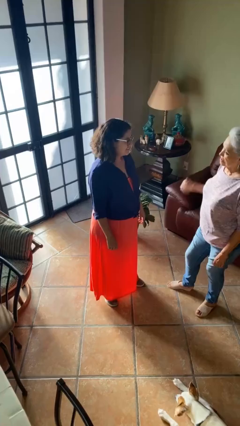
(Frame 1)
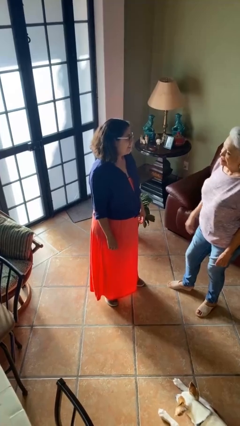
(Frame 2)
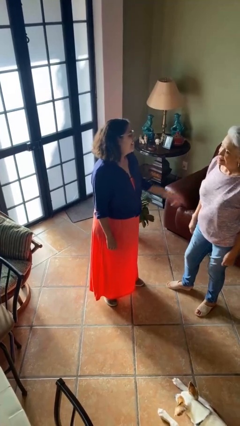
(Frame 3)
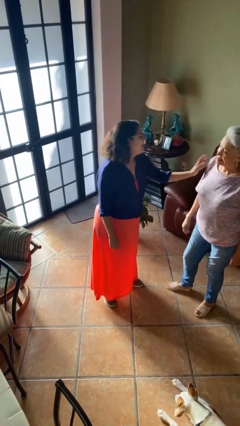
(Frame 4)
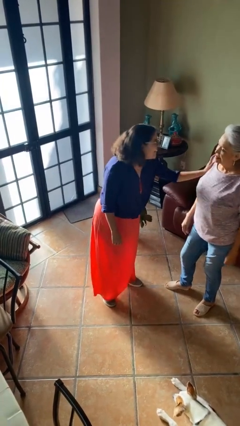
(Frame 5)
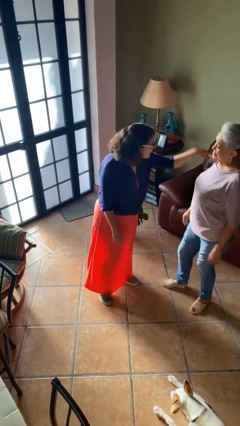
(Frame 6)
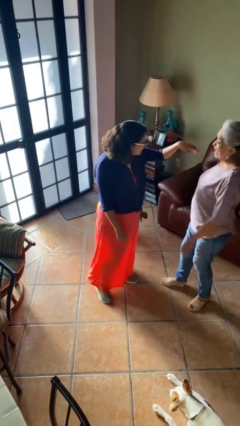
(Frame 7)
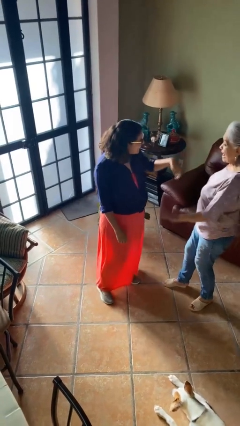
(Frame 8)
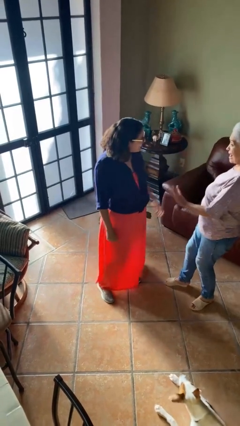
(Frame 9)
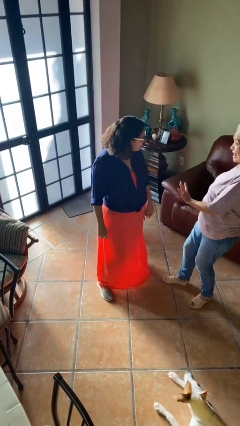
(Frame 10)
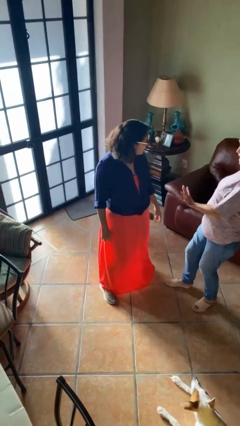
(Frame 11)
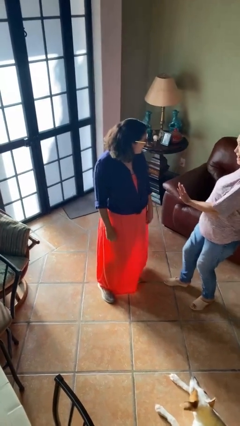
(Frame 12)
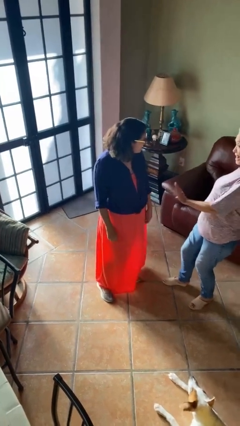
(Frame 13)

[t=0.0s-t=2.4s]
person shoves person

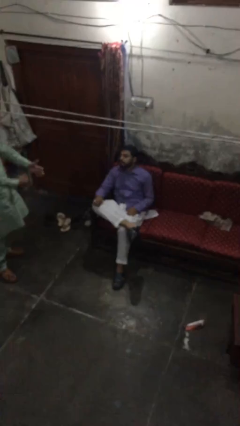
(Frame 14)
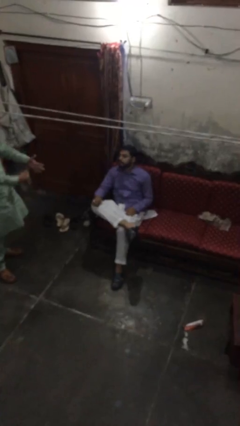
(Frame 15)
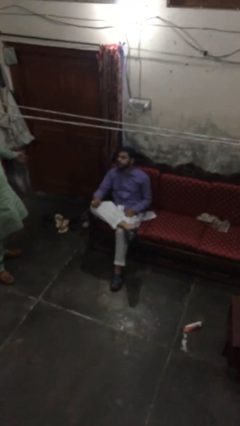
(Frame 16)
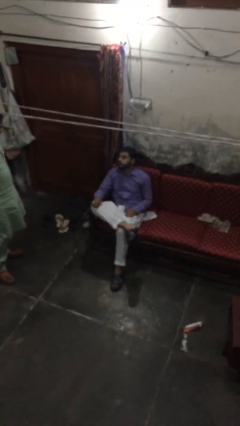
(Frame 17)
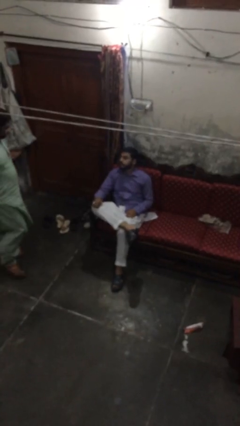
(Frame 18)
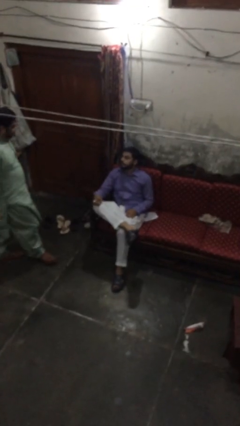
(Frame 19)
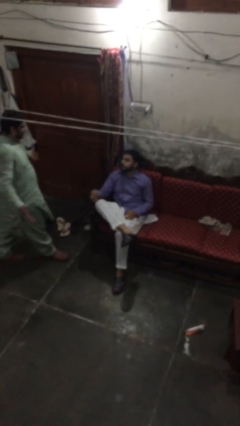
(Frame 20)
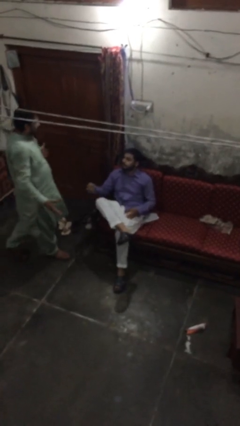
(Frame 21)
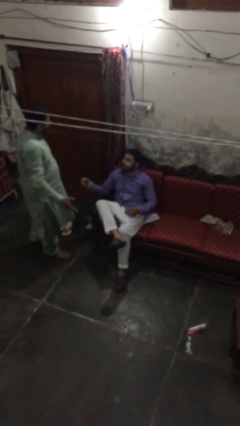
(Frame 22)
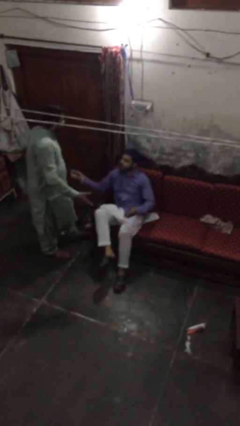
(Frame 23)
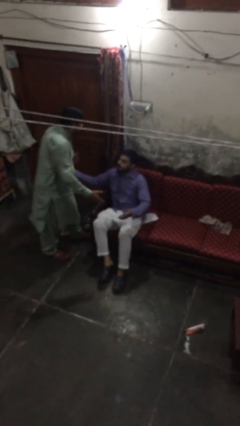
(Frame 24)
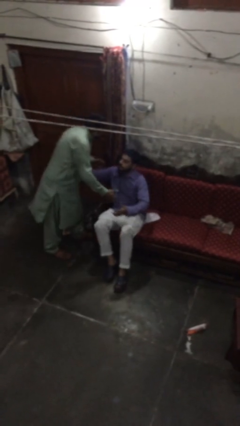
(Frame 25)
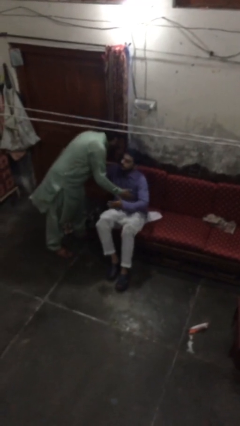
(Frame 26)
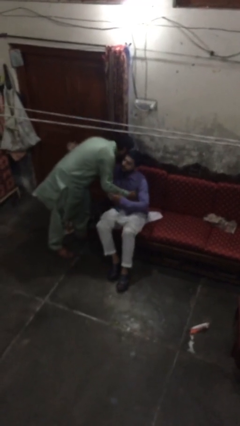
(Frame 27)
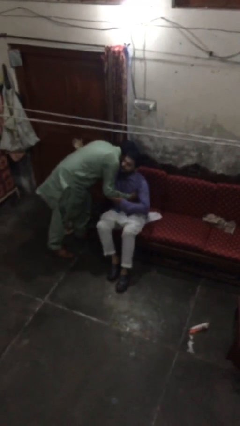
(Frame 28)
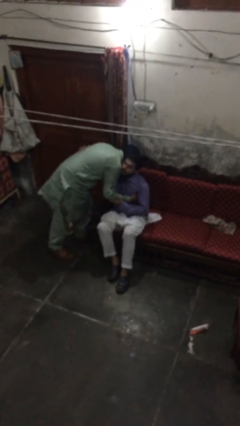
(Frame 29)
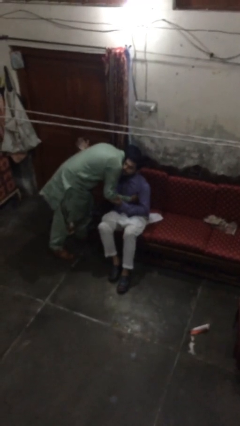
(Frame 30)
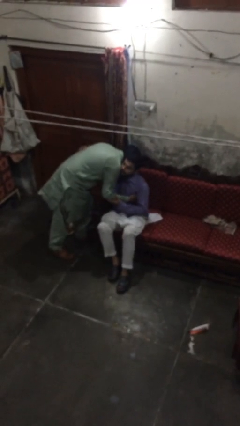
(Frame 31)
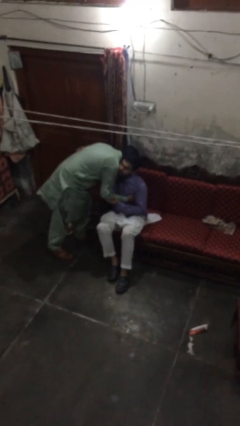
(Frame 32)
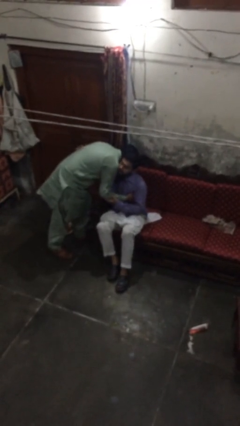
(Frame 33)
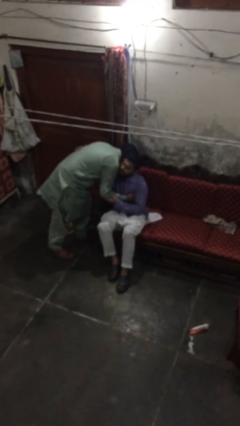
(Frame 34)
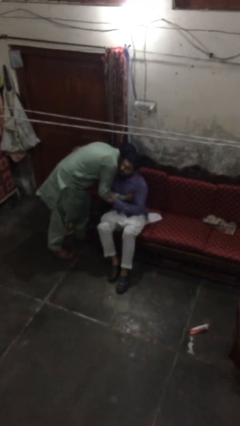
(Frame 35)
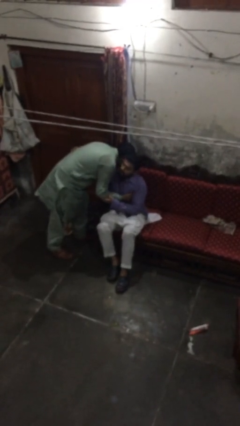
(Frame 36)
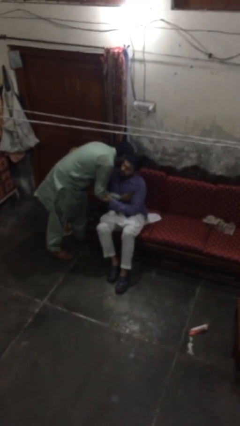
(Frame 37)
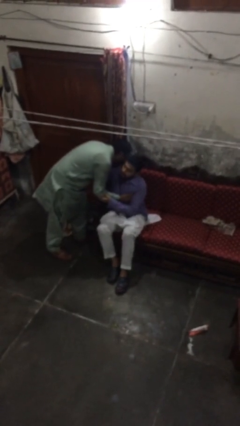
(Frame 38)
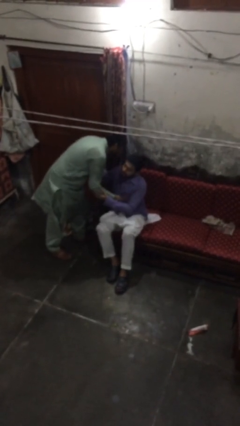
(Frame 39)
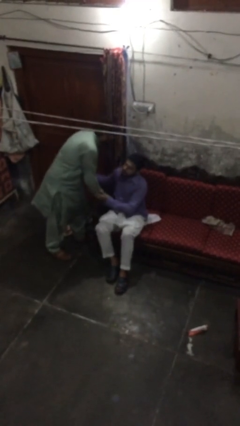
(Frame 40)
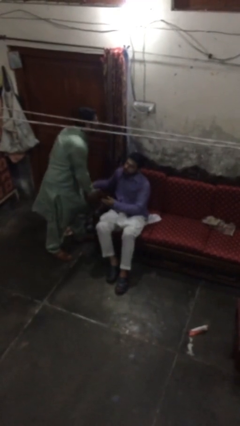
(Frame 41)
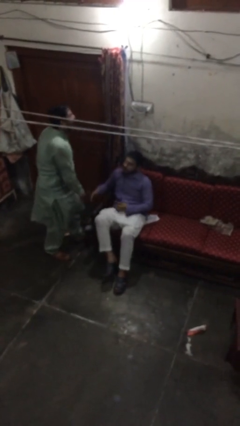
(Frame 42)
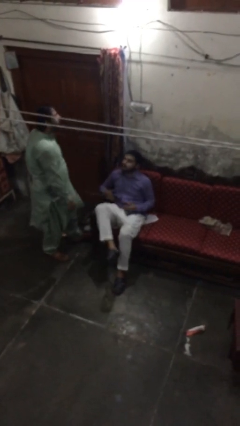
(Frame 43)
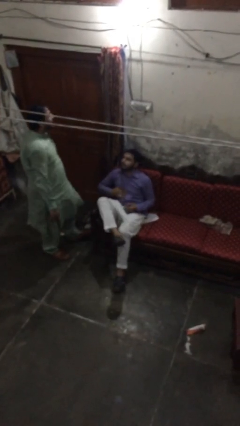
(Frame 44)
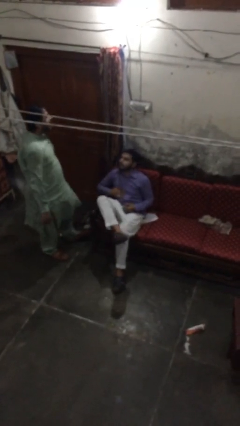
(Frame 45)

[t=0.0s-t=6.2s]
person embraces person

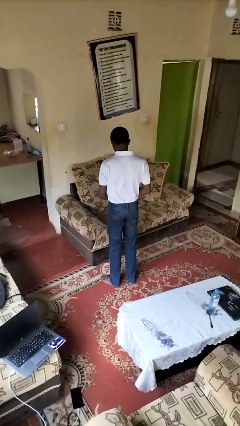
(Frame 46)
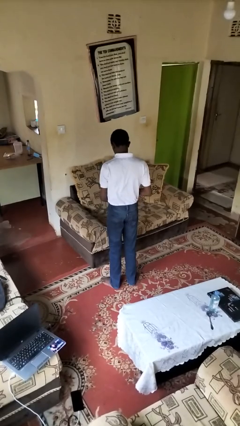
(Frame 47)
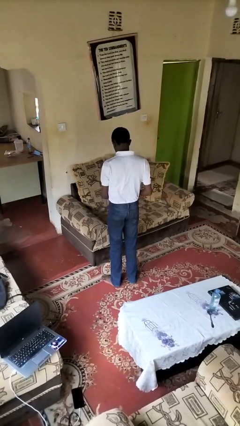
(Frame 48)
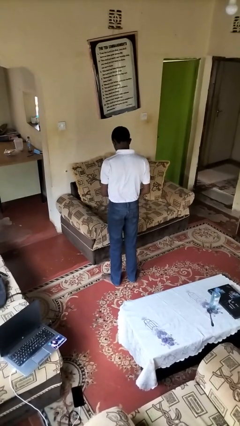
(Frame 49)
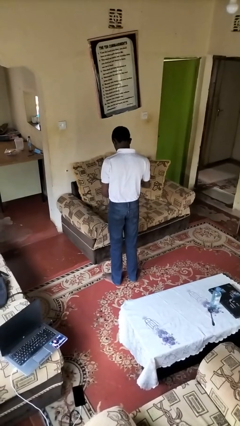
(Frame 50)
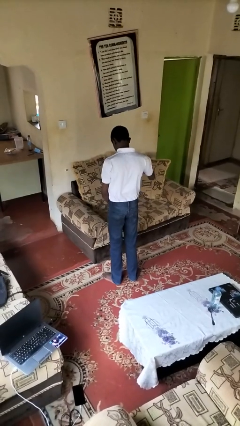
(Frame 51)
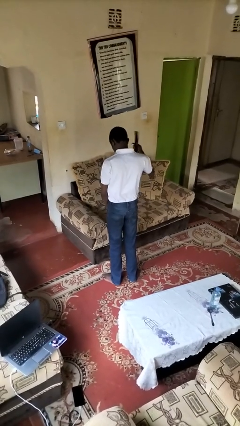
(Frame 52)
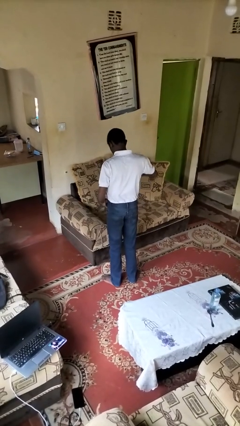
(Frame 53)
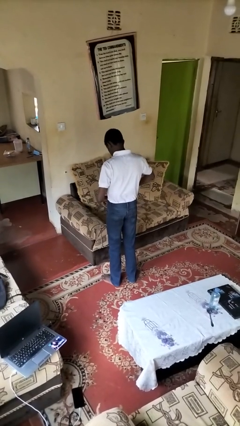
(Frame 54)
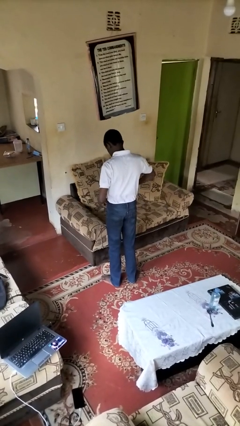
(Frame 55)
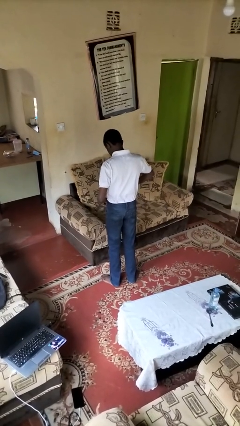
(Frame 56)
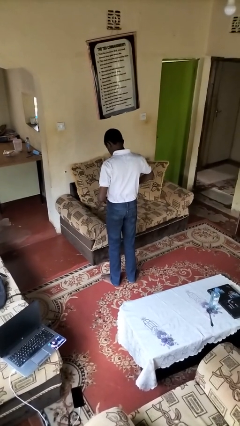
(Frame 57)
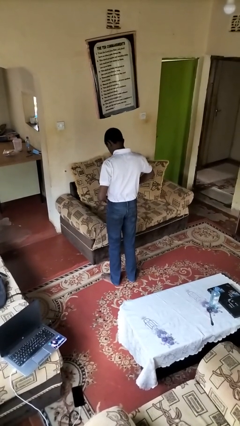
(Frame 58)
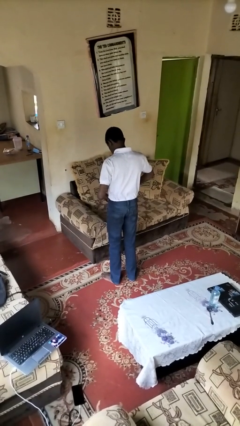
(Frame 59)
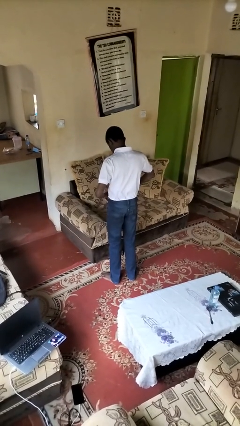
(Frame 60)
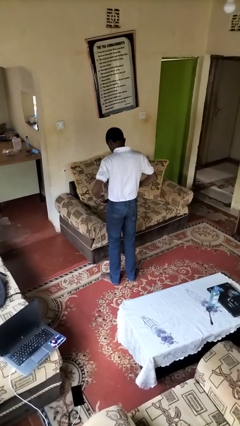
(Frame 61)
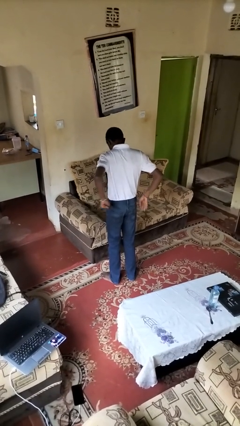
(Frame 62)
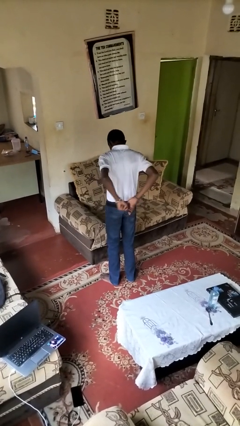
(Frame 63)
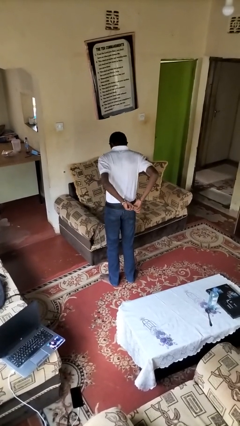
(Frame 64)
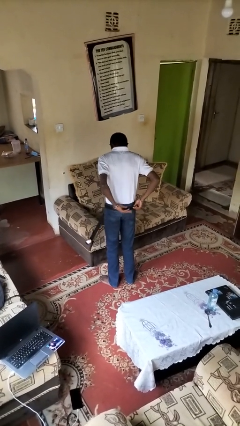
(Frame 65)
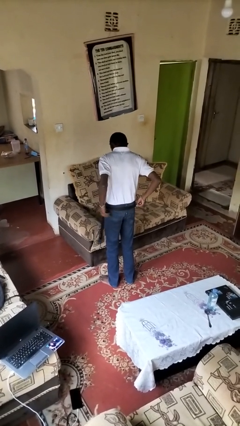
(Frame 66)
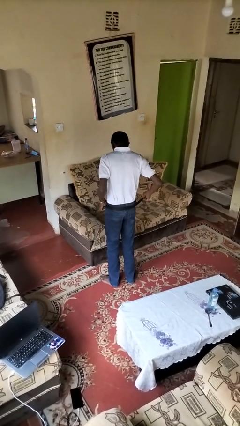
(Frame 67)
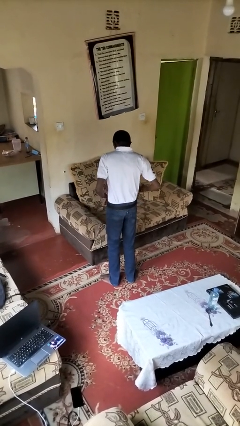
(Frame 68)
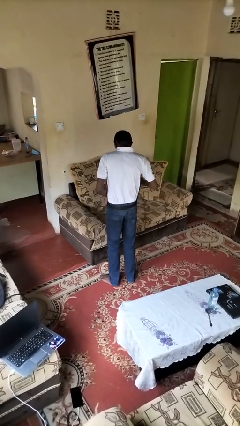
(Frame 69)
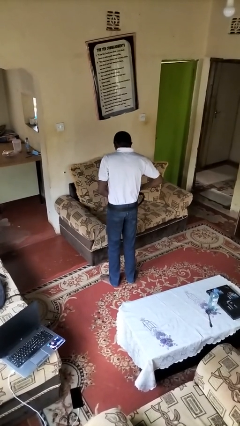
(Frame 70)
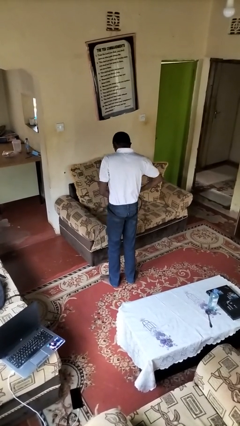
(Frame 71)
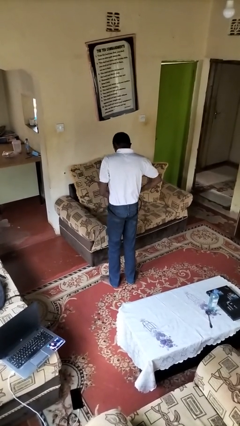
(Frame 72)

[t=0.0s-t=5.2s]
person puts on belt

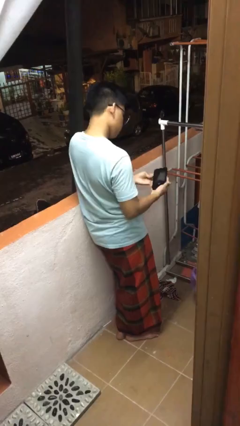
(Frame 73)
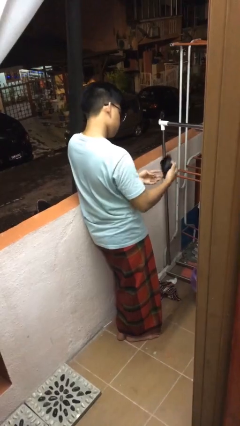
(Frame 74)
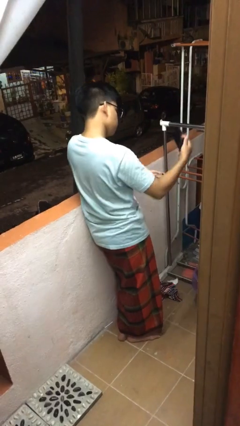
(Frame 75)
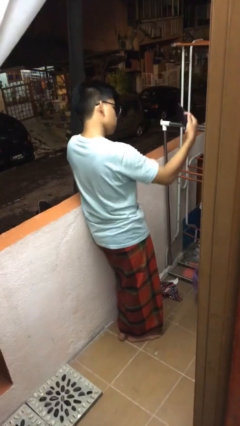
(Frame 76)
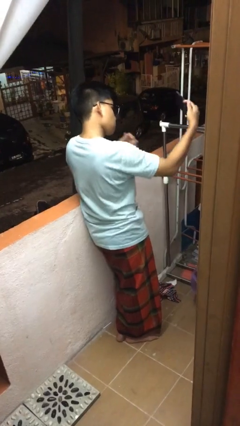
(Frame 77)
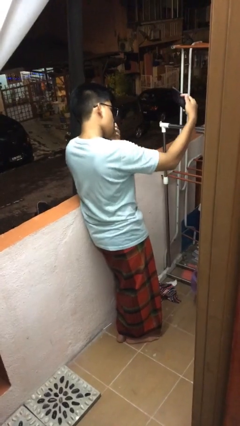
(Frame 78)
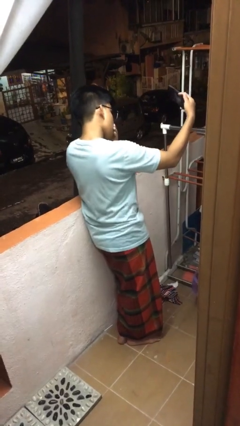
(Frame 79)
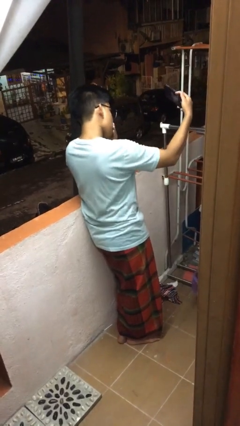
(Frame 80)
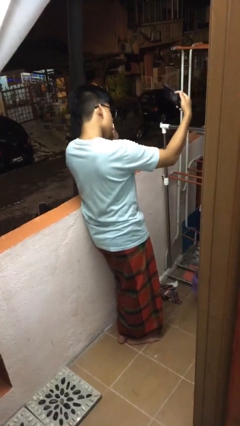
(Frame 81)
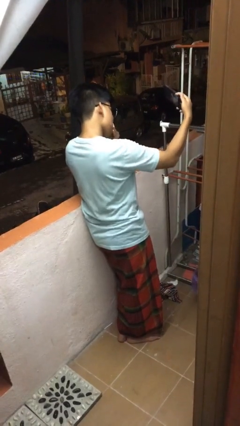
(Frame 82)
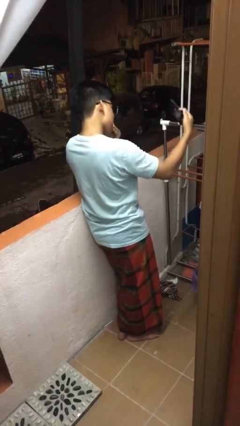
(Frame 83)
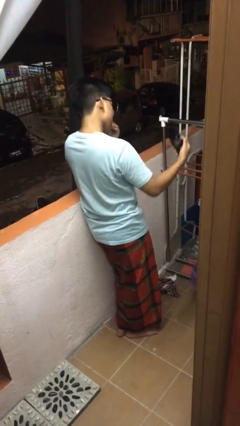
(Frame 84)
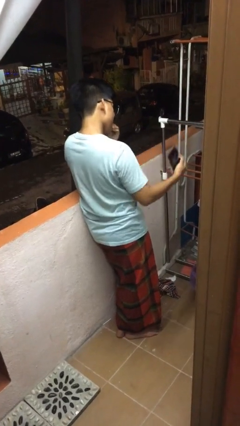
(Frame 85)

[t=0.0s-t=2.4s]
person takes selfie

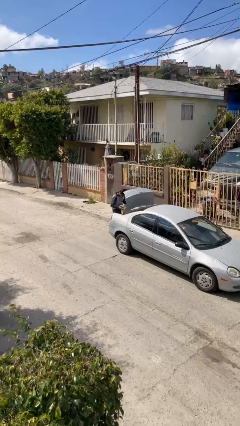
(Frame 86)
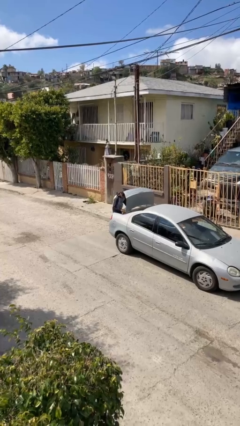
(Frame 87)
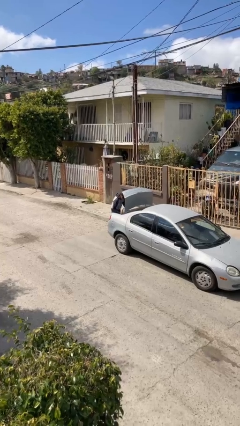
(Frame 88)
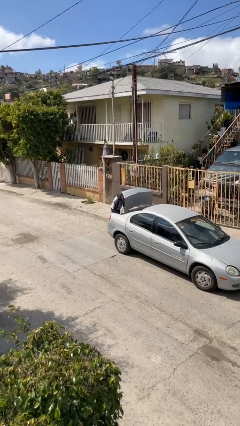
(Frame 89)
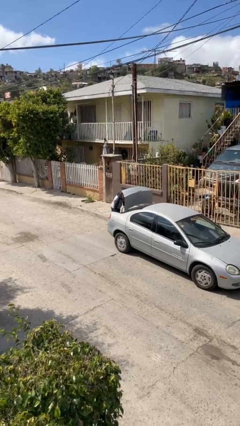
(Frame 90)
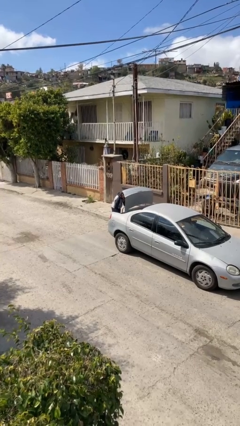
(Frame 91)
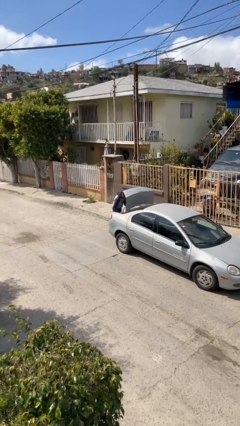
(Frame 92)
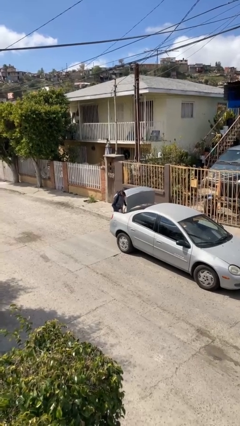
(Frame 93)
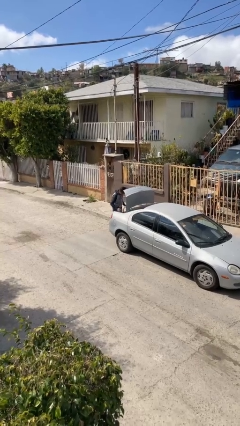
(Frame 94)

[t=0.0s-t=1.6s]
person loads car
